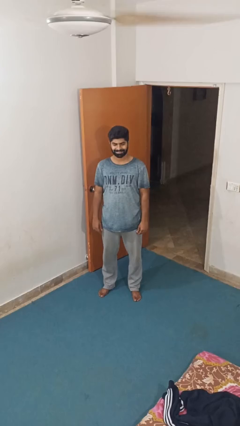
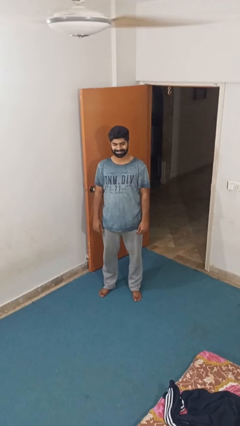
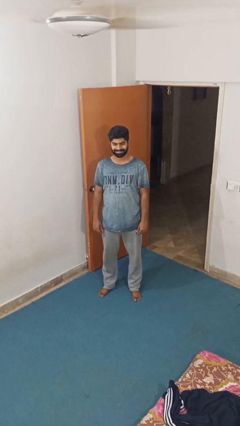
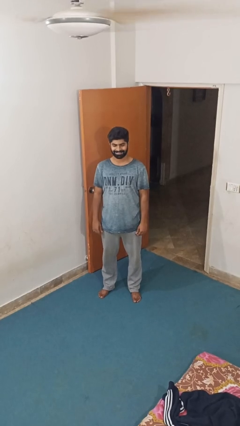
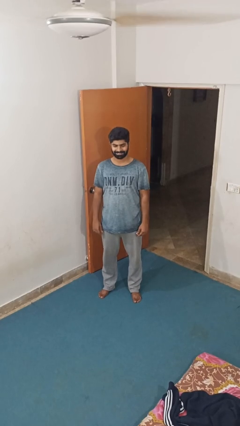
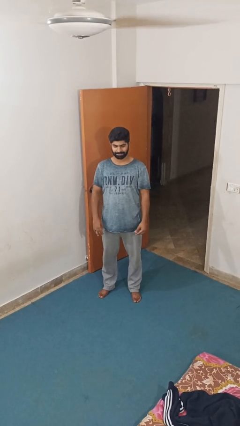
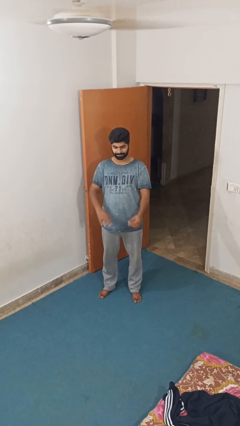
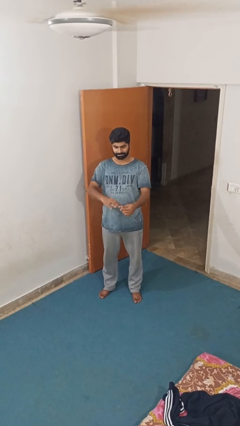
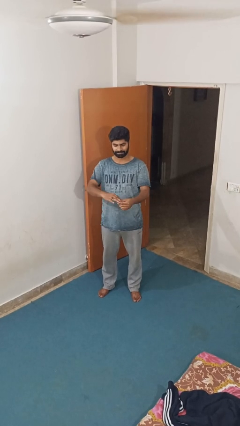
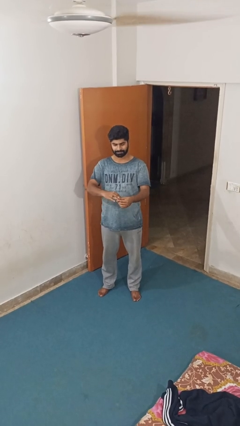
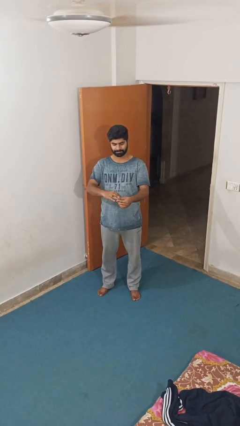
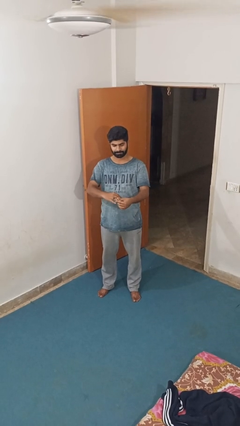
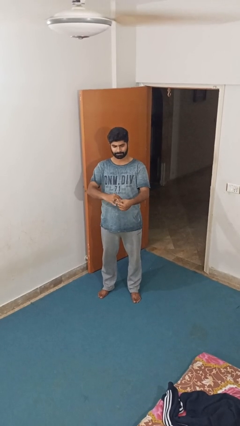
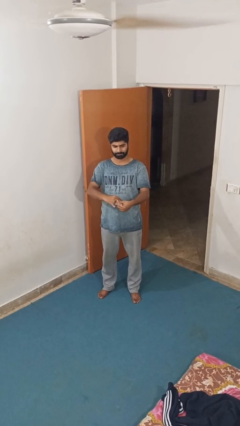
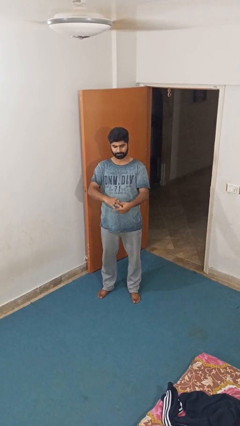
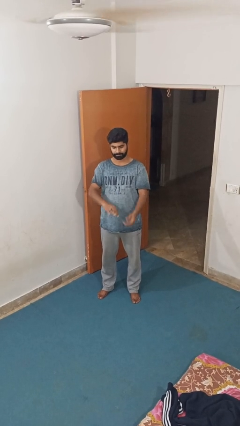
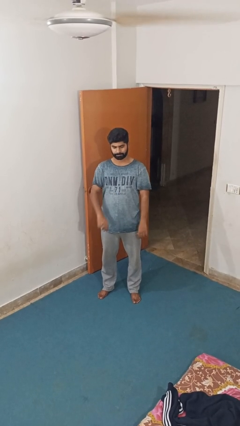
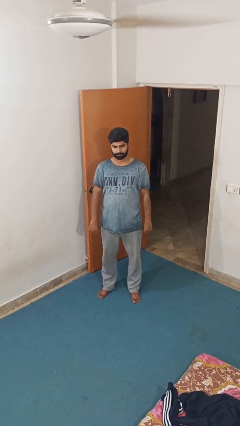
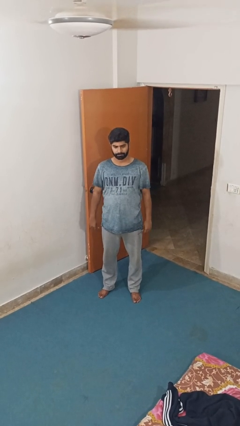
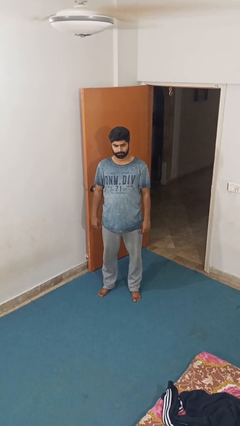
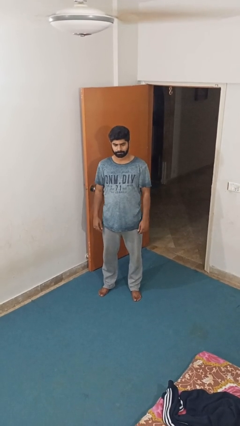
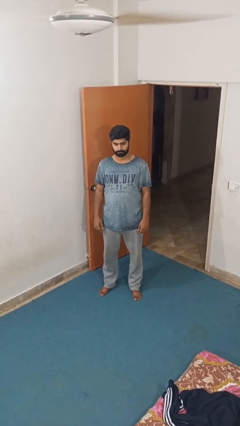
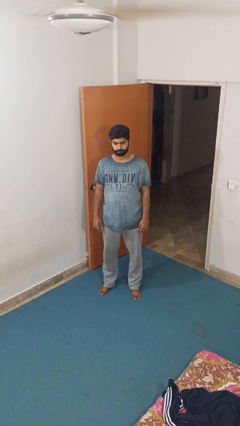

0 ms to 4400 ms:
person puts on ring

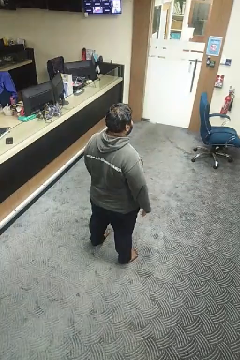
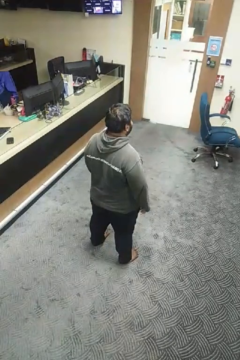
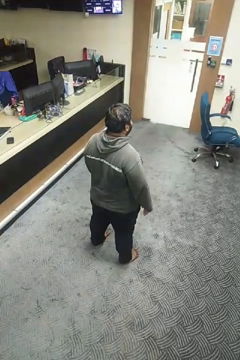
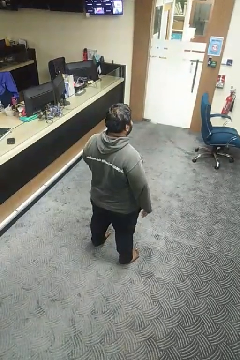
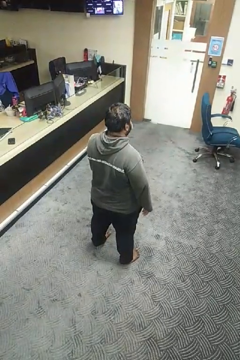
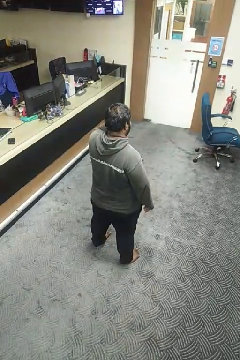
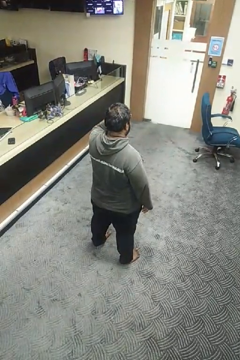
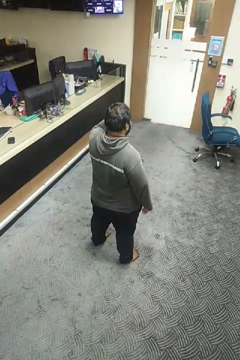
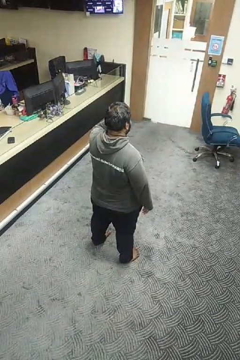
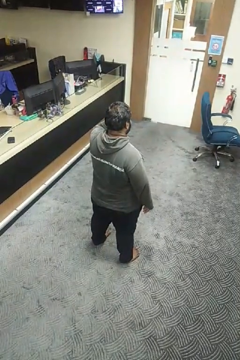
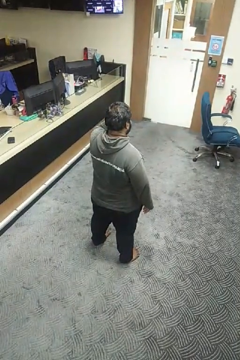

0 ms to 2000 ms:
person rubs eyes

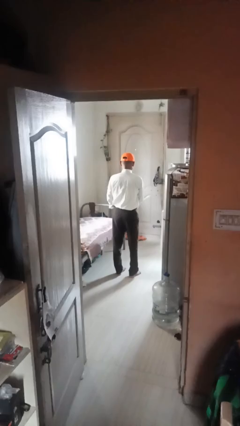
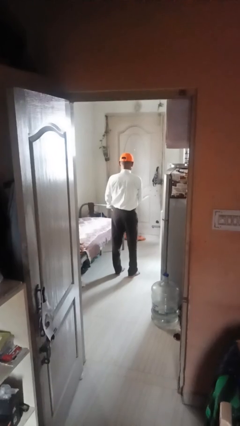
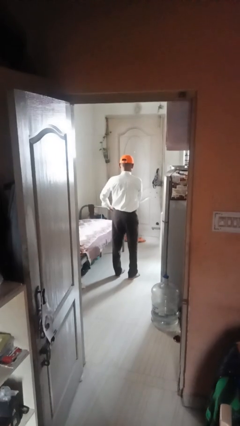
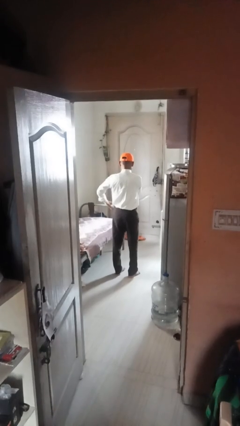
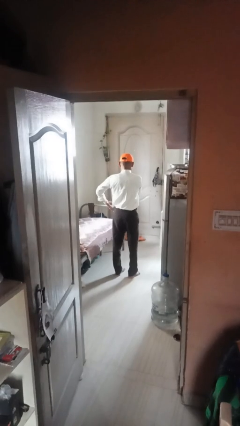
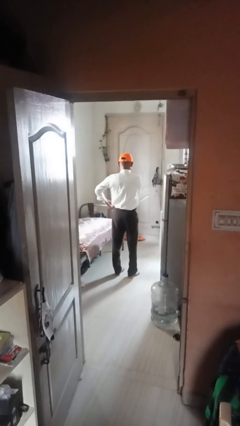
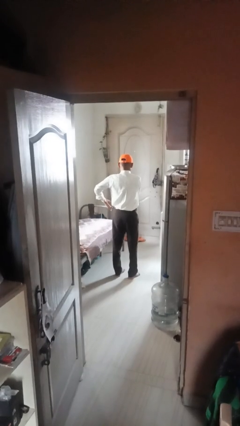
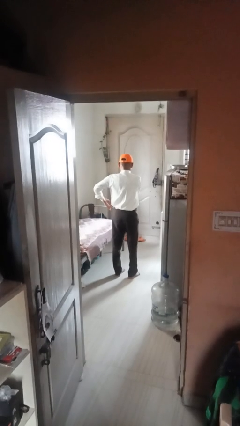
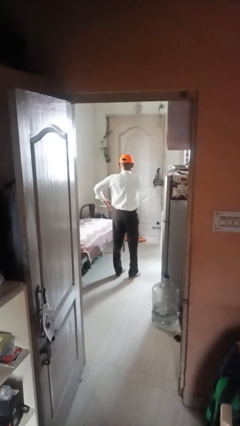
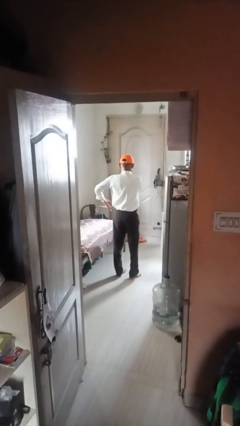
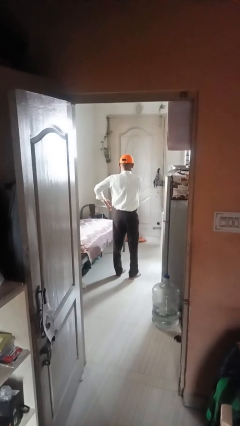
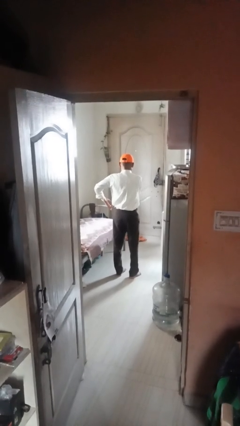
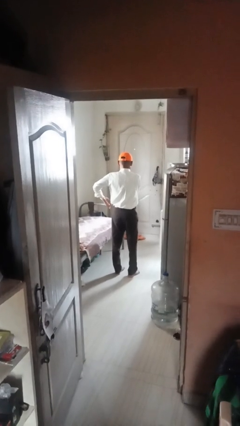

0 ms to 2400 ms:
person gestures heart

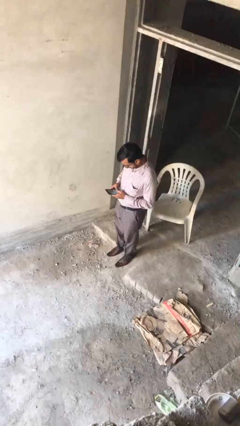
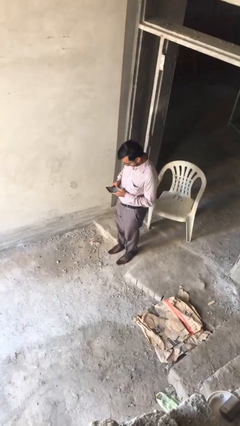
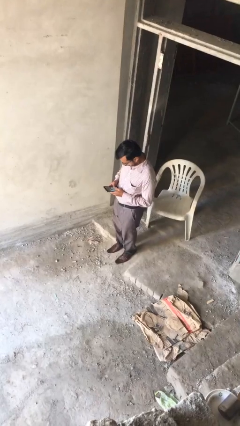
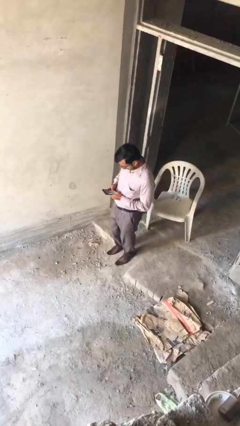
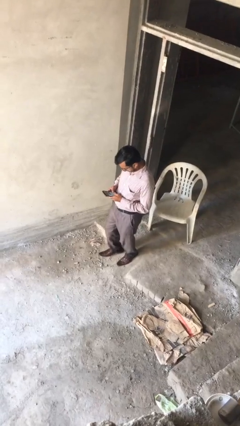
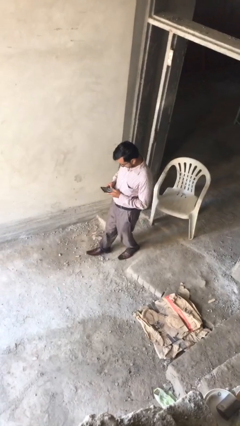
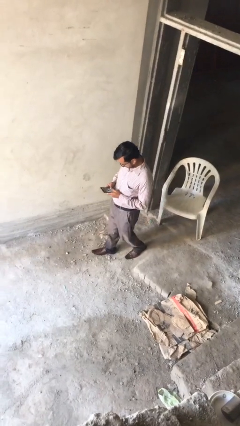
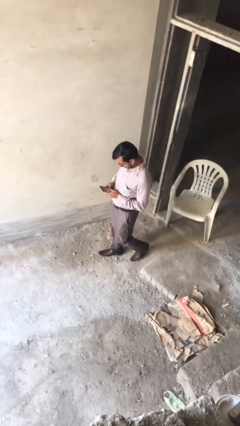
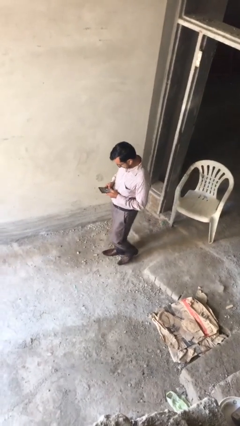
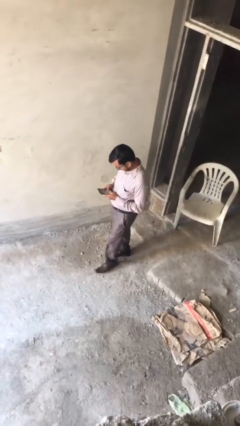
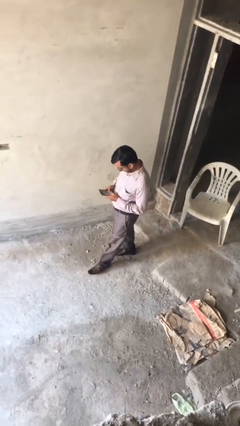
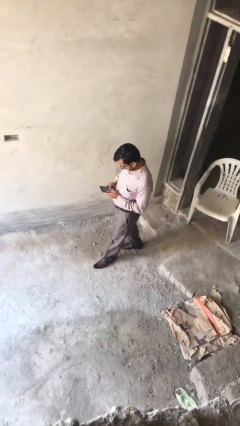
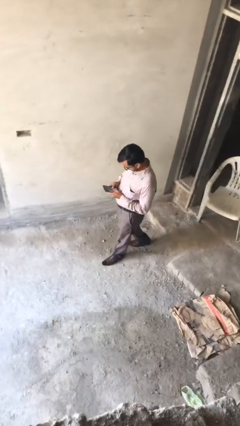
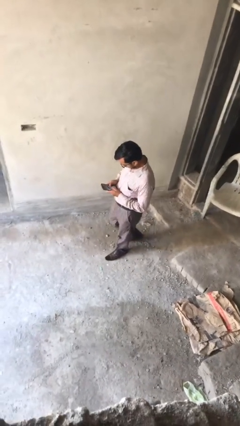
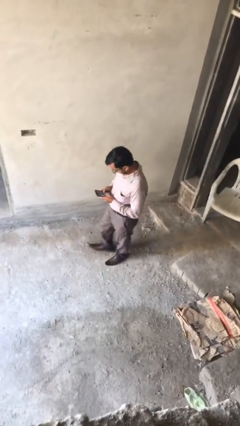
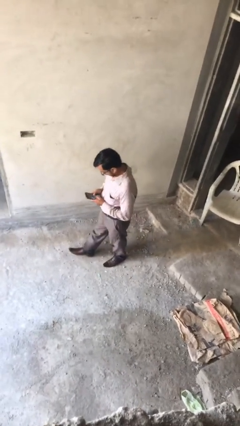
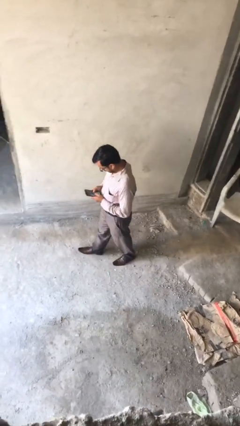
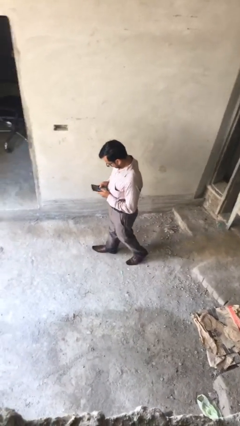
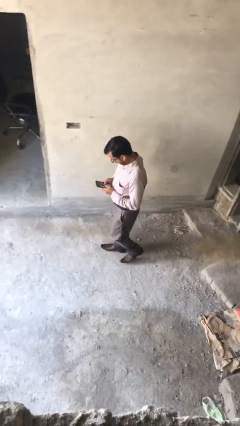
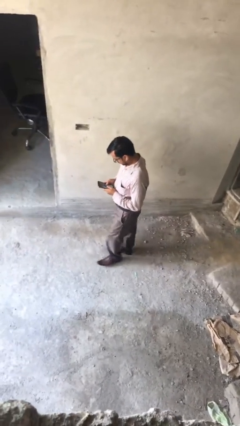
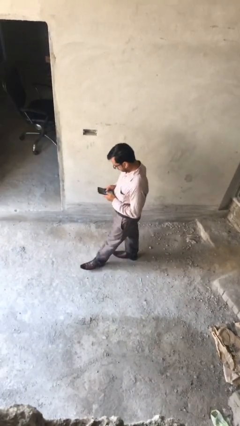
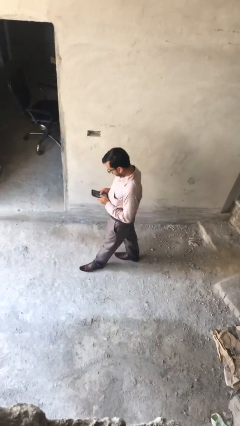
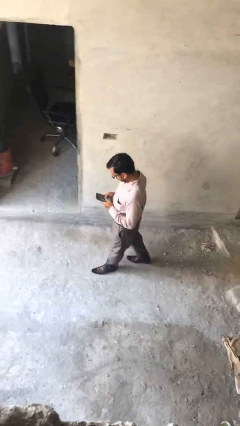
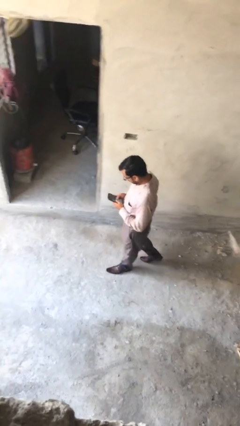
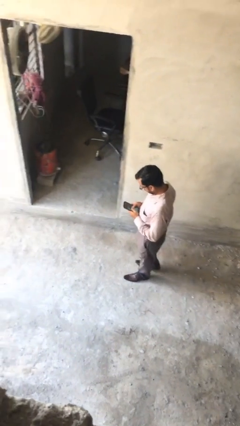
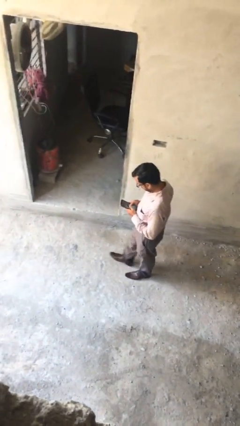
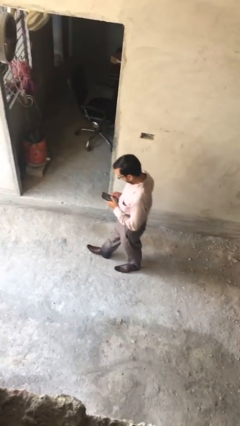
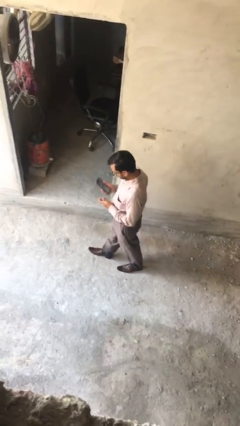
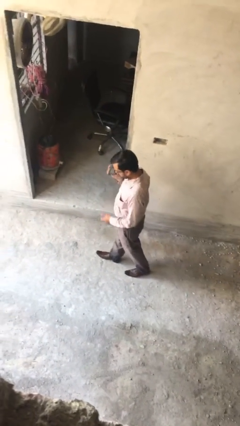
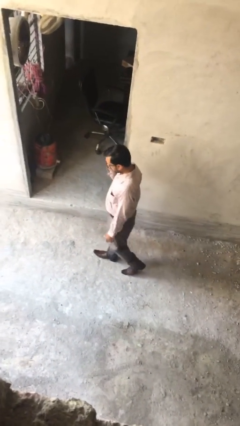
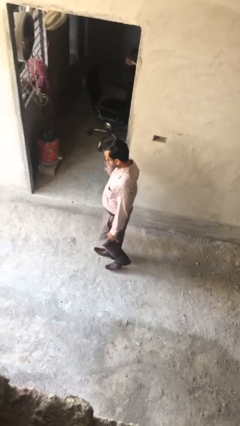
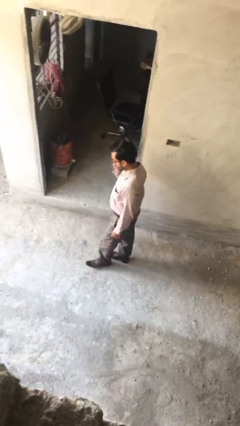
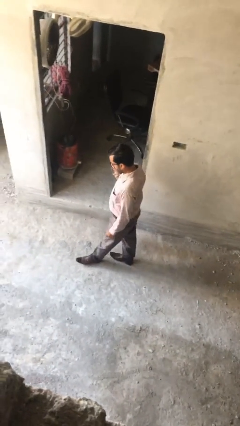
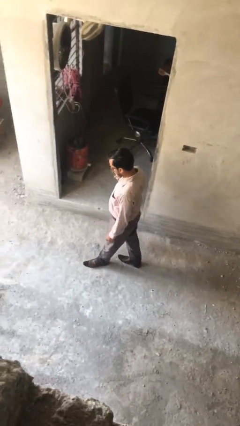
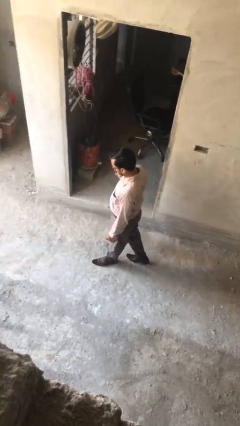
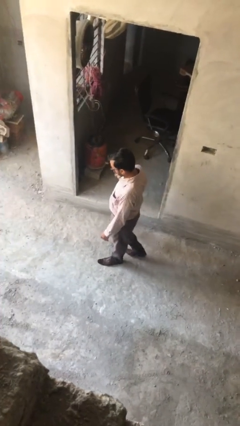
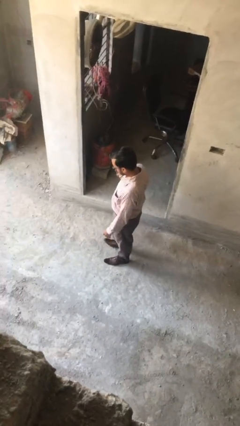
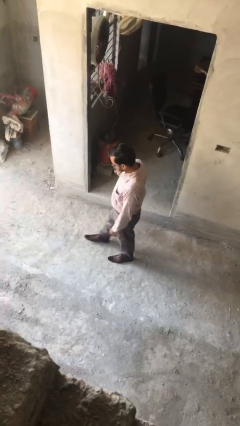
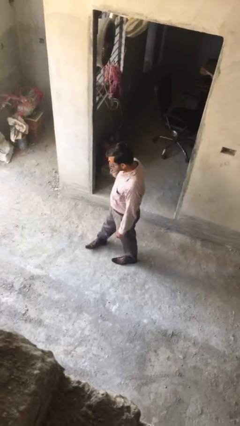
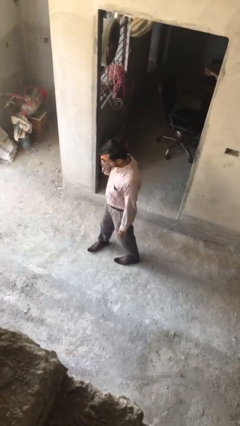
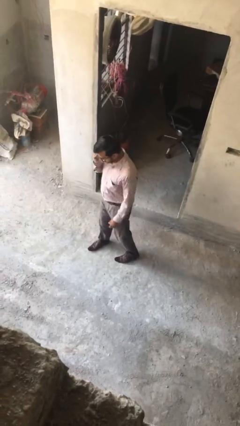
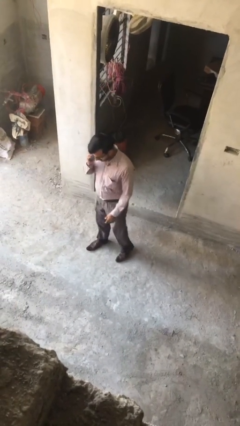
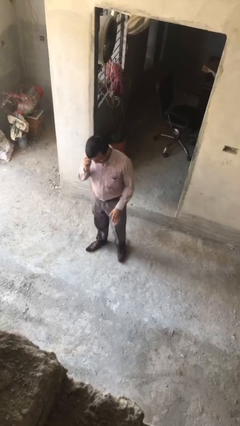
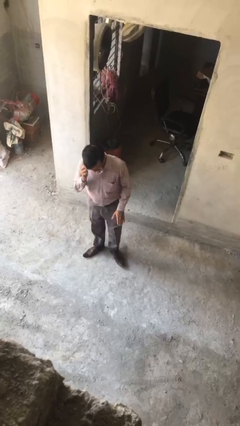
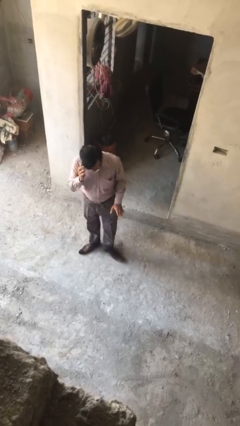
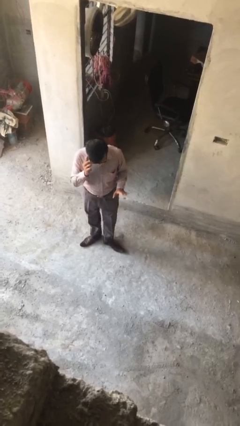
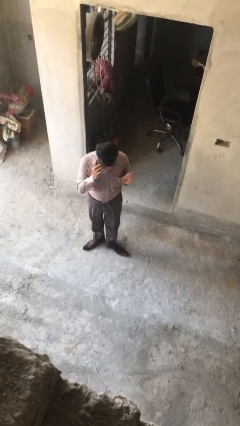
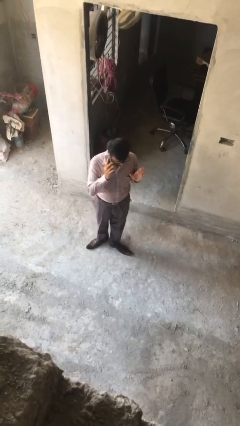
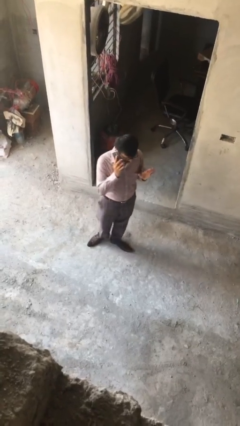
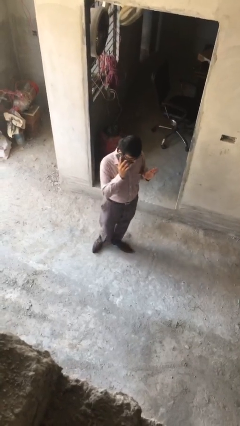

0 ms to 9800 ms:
person texts on phone
